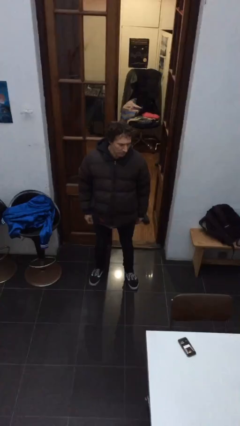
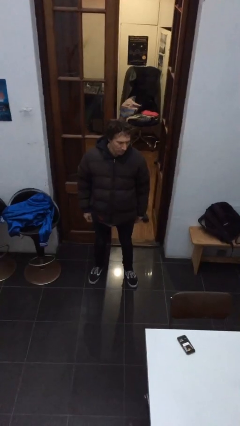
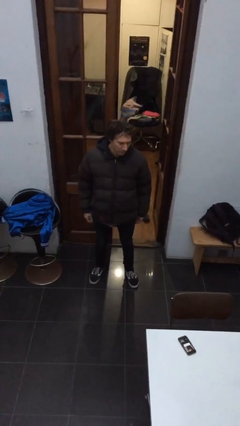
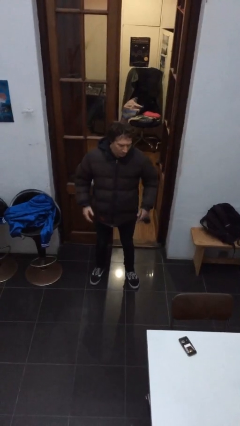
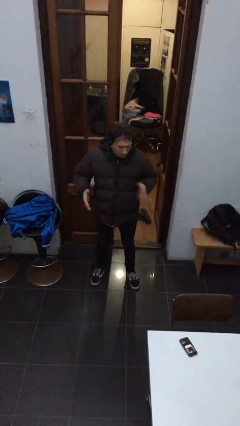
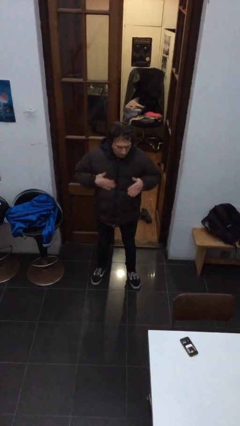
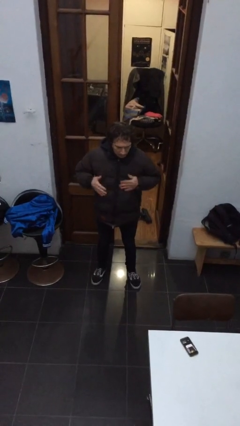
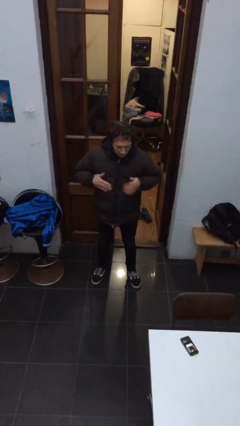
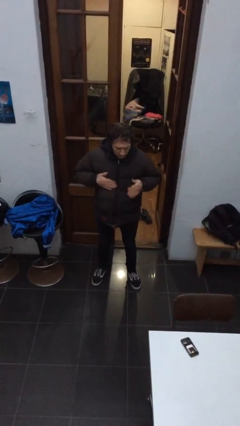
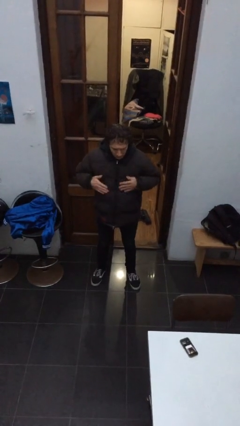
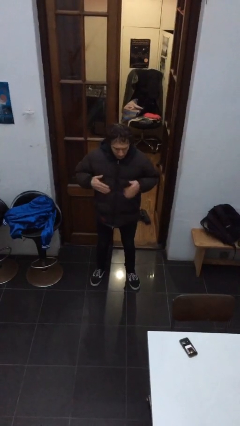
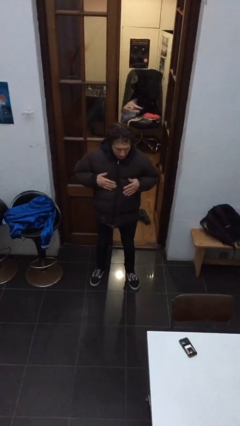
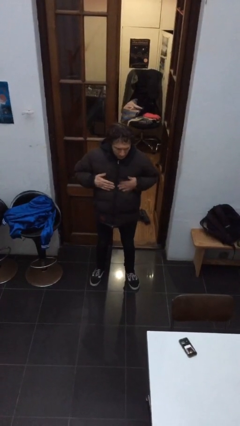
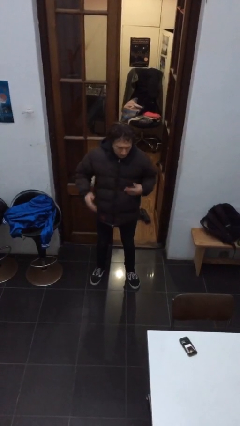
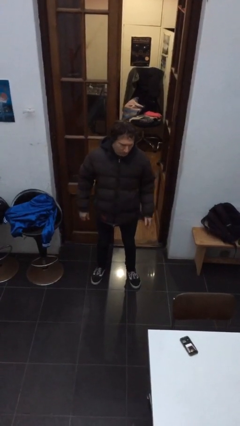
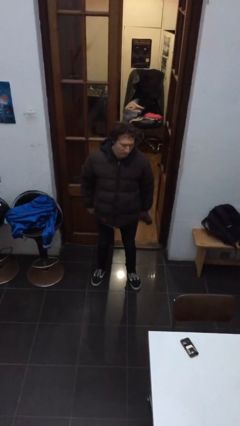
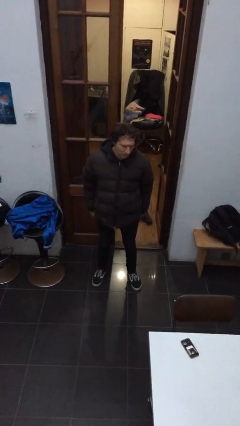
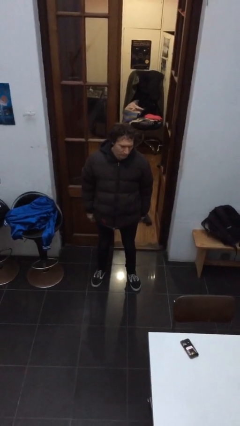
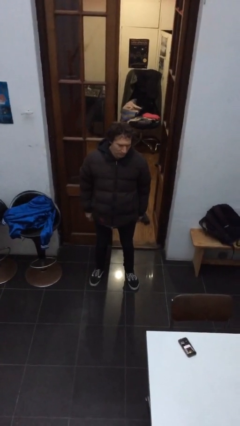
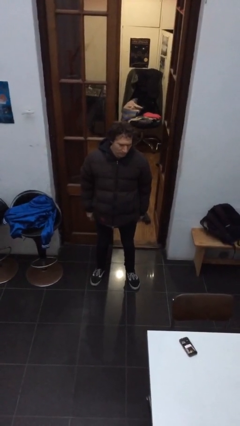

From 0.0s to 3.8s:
person drums on chest

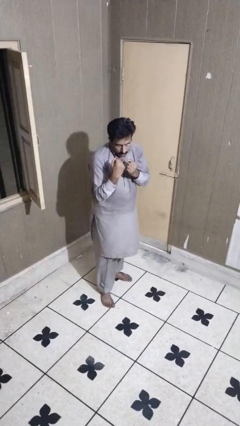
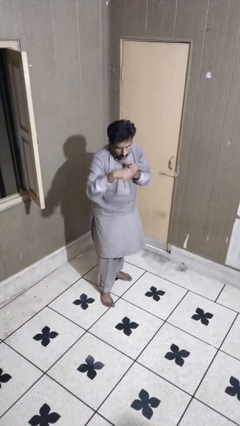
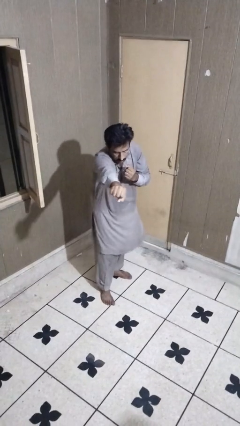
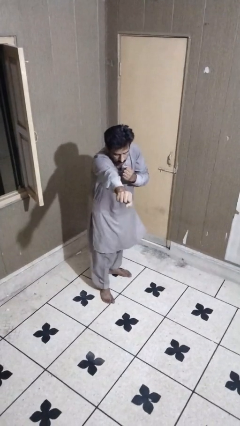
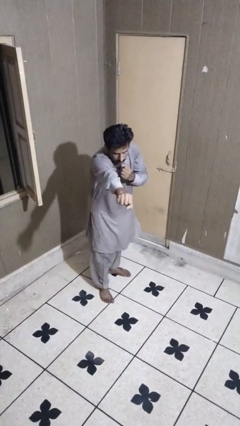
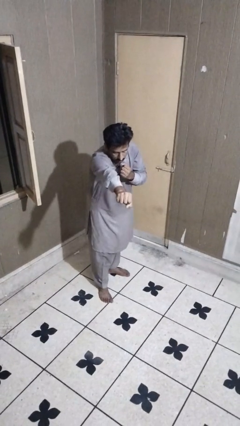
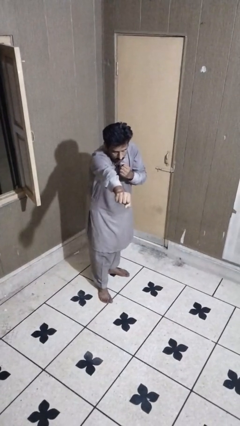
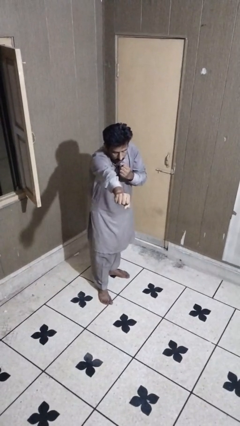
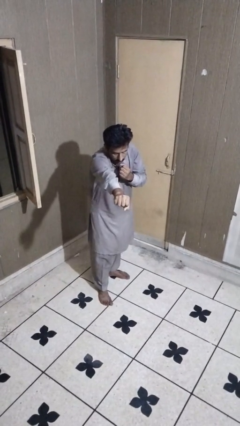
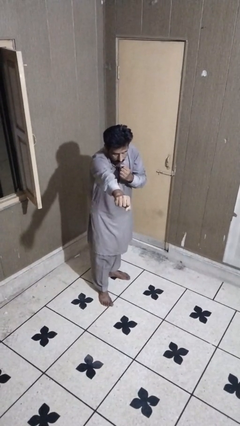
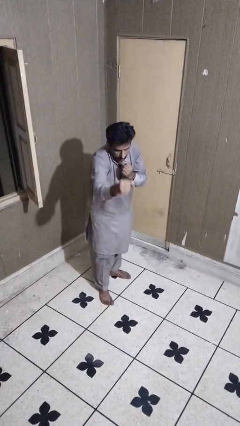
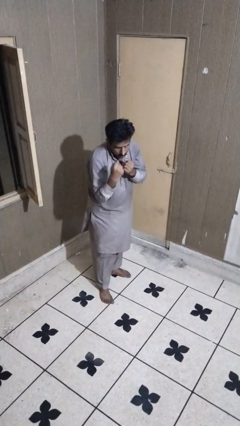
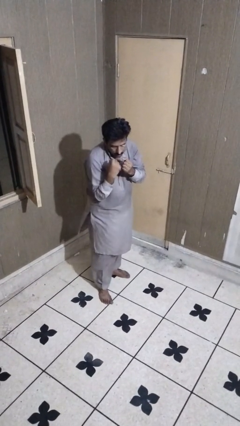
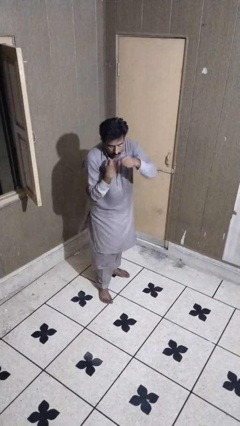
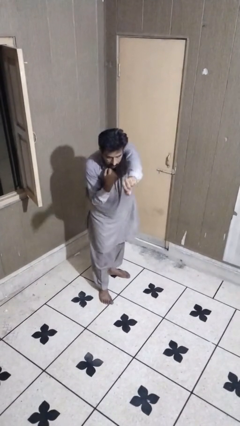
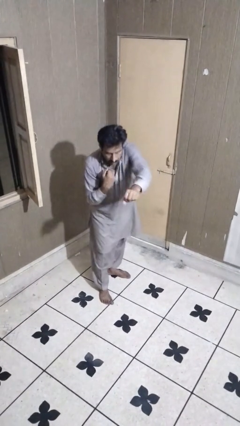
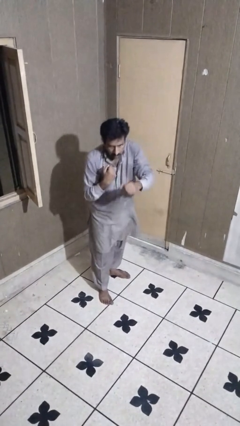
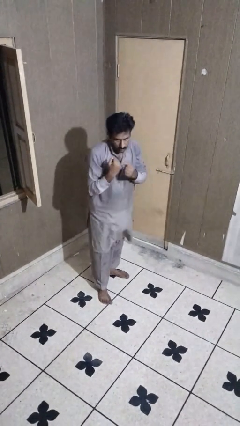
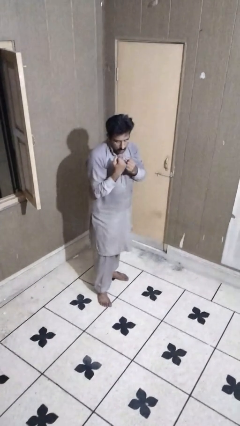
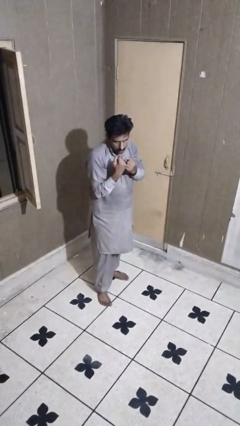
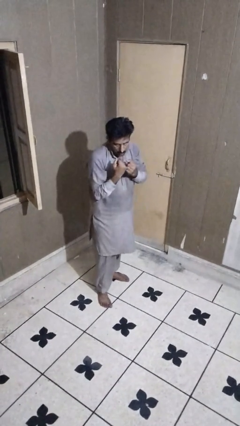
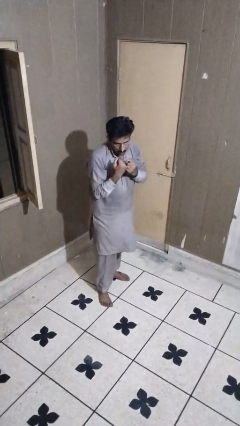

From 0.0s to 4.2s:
person punches

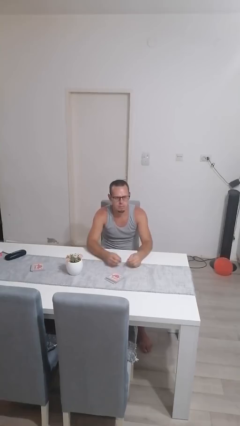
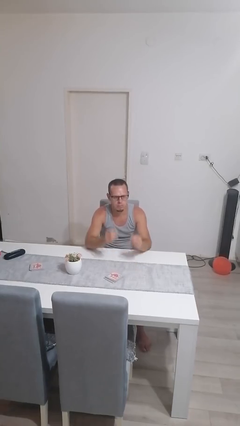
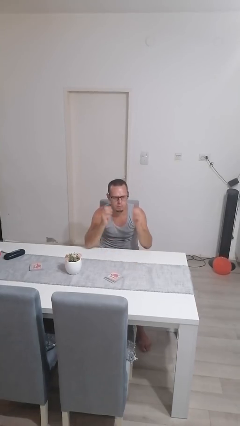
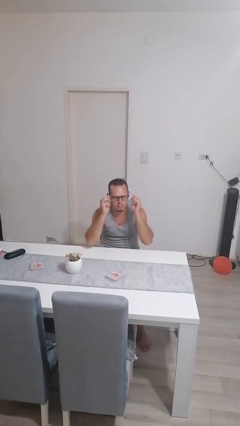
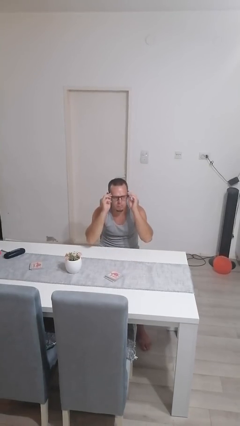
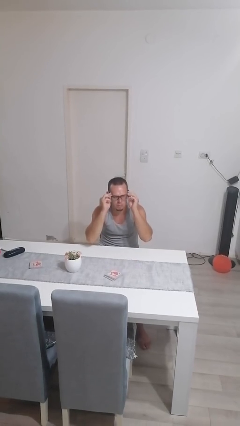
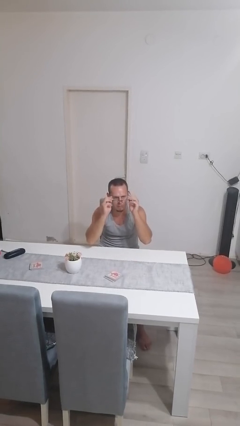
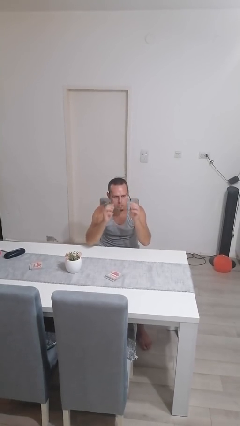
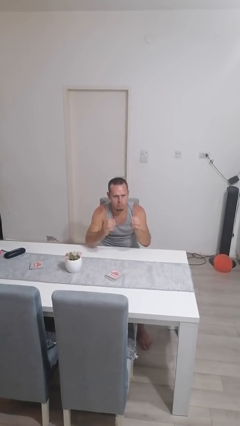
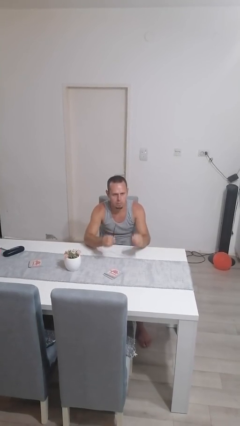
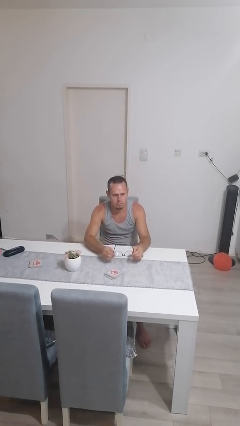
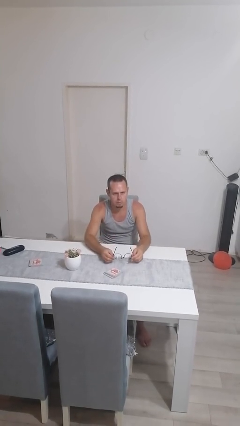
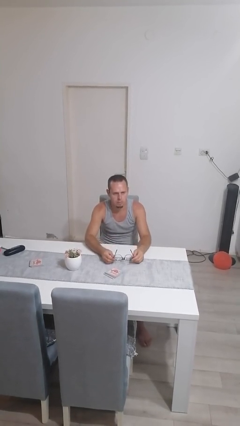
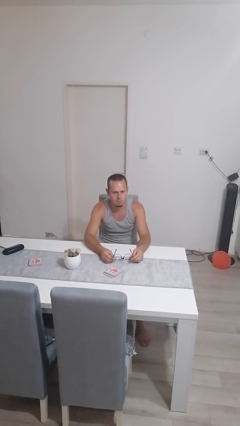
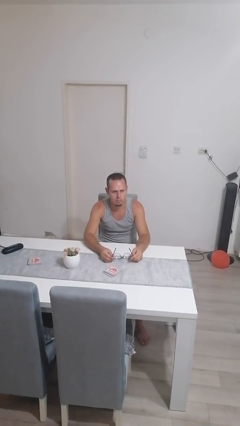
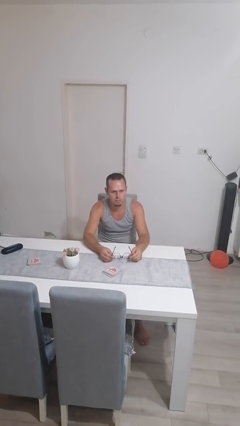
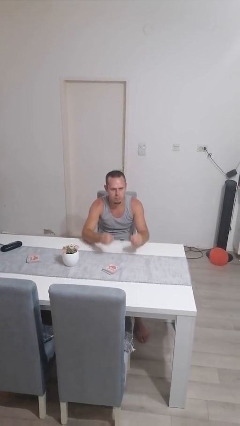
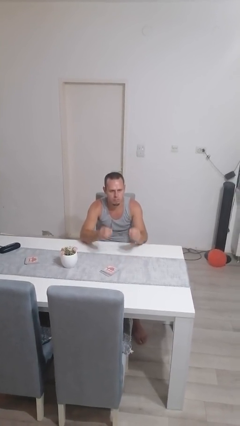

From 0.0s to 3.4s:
person takes off glasses

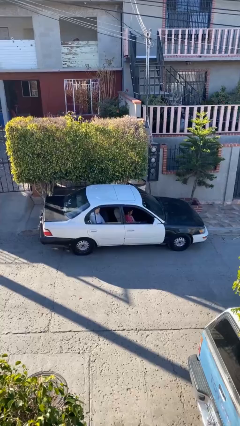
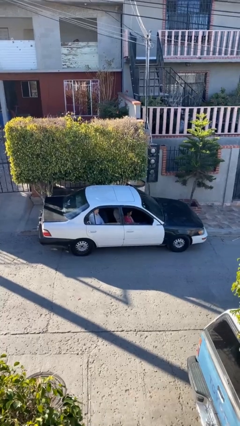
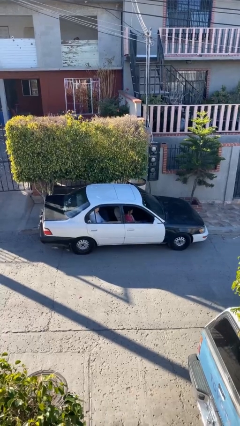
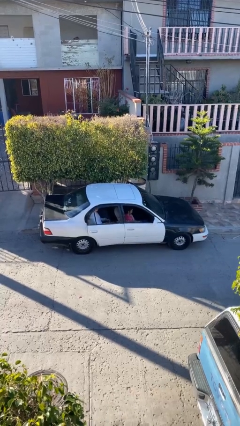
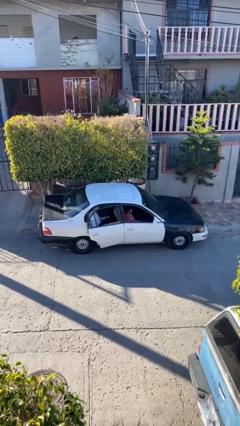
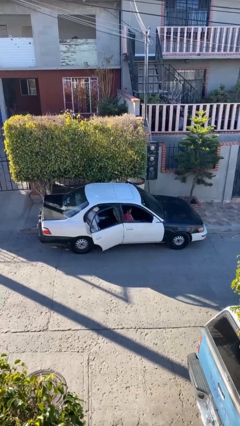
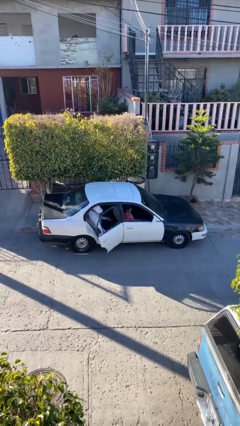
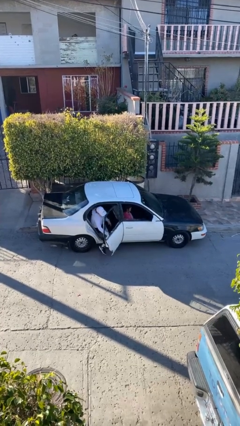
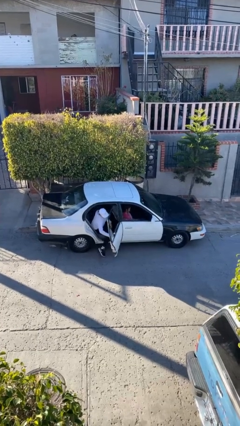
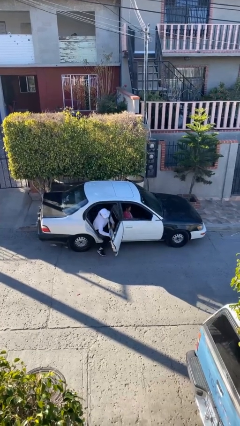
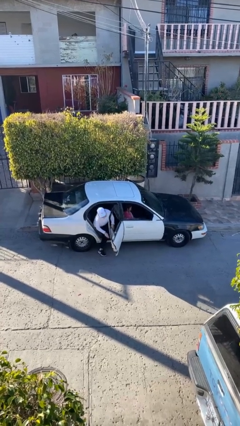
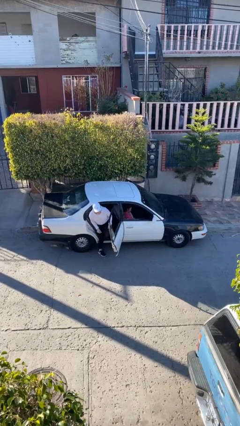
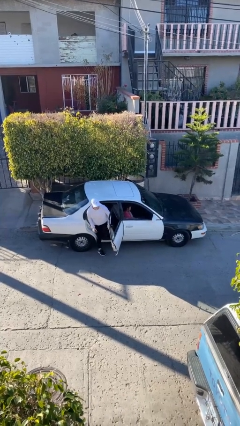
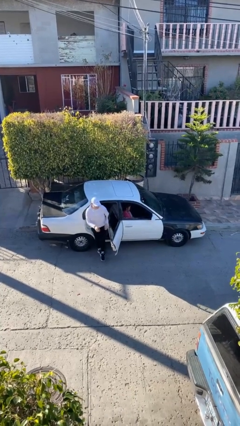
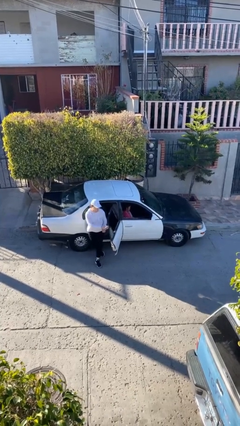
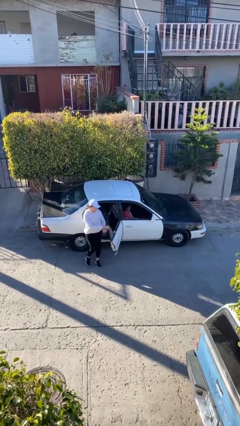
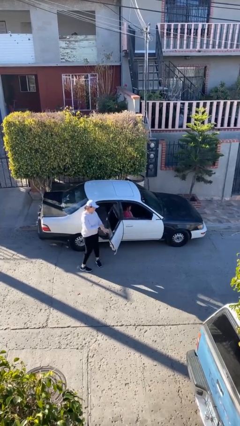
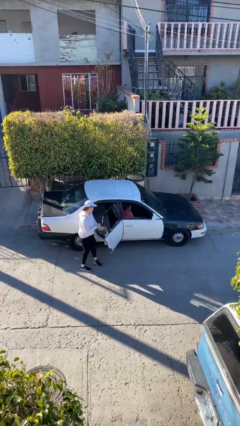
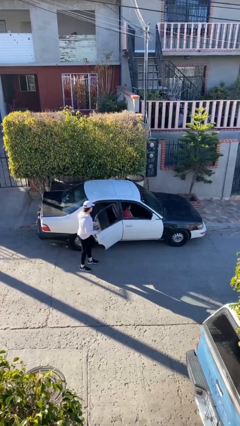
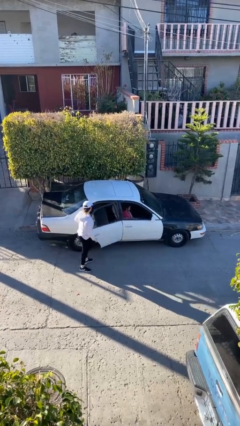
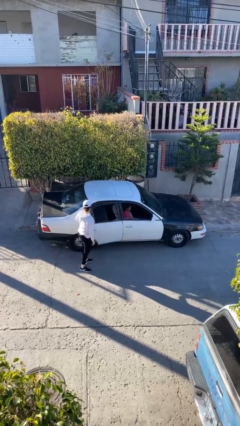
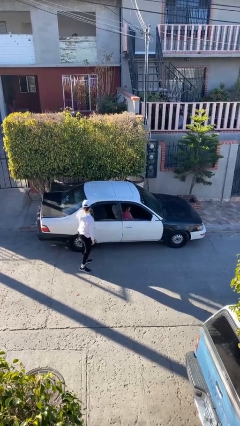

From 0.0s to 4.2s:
car drops off person

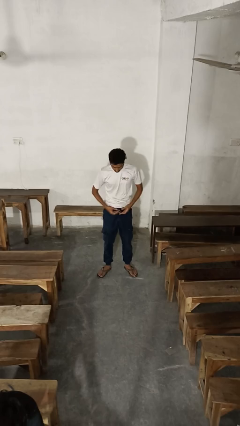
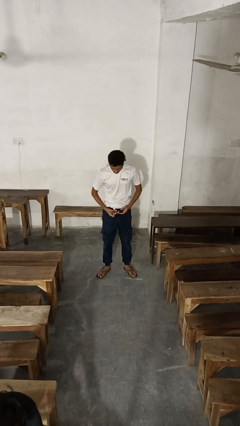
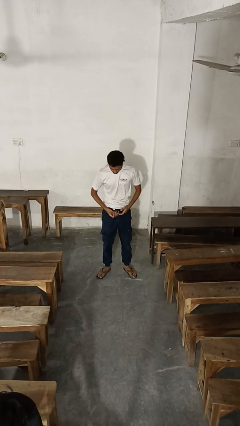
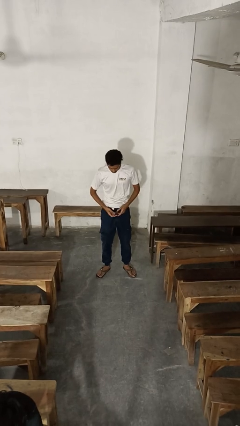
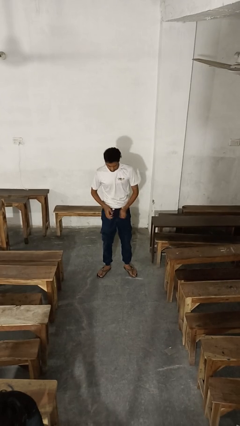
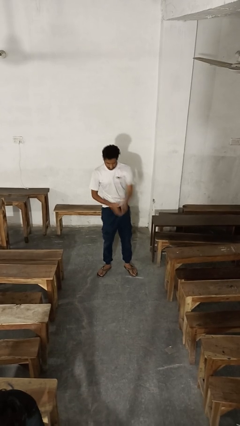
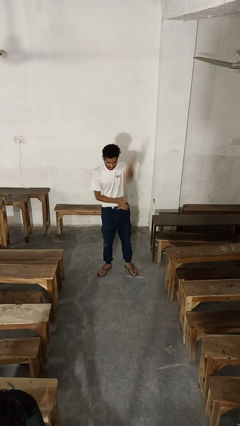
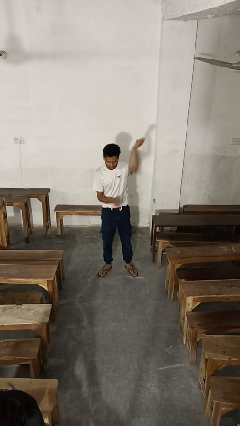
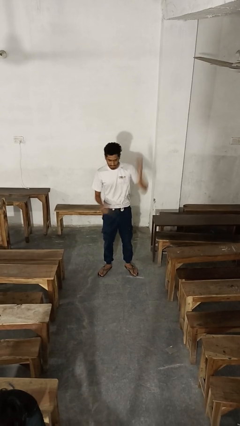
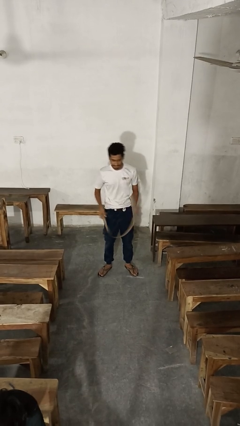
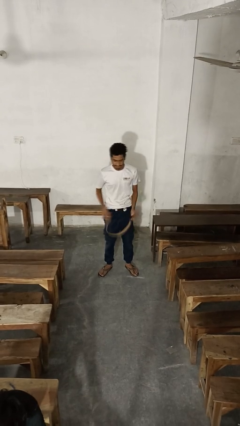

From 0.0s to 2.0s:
person takes off belt
